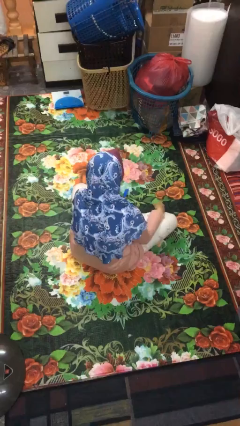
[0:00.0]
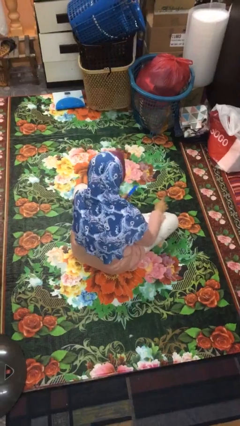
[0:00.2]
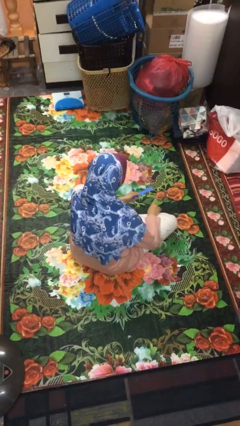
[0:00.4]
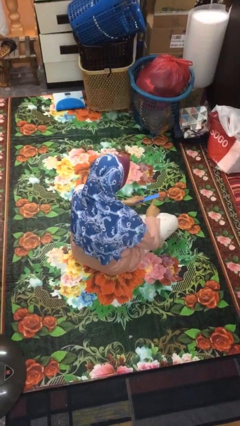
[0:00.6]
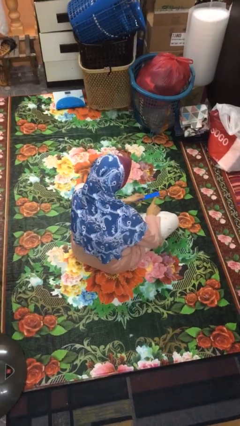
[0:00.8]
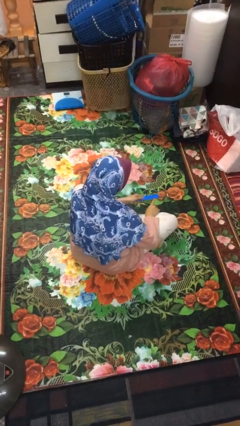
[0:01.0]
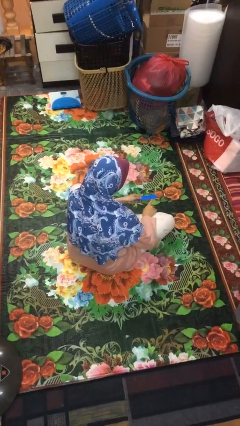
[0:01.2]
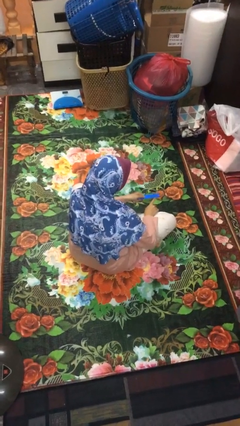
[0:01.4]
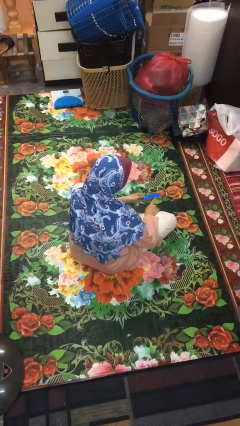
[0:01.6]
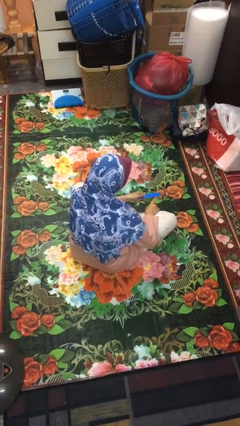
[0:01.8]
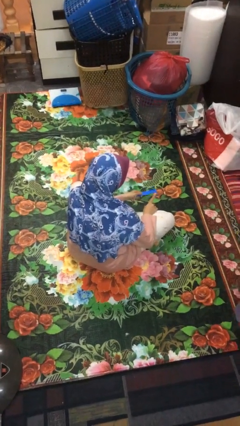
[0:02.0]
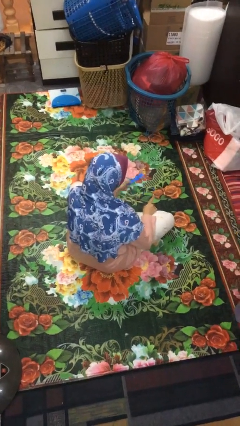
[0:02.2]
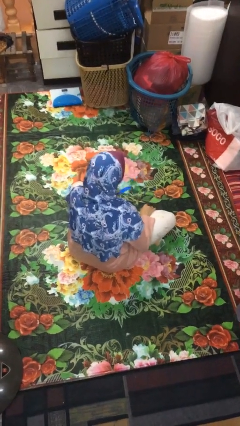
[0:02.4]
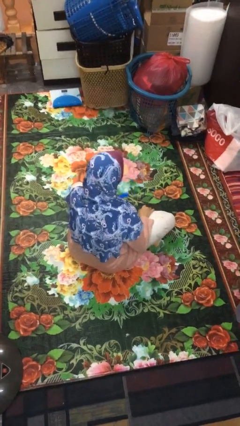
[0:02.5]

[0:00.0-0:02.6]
person files fingernails

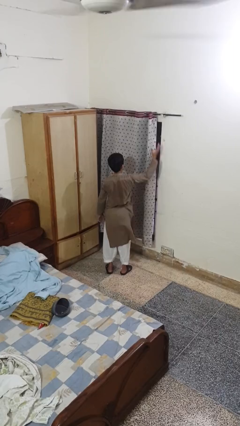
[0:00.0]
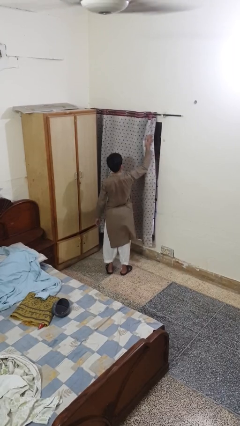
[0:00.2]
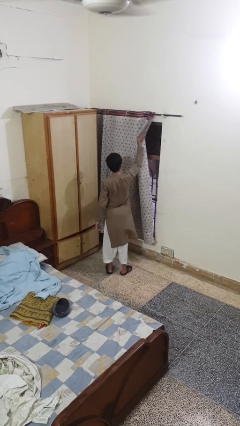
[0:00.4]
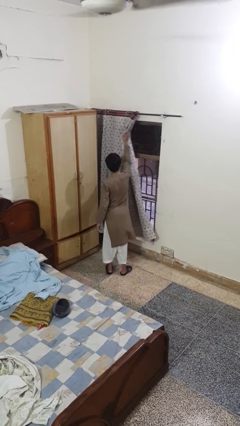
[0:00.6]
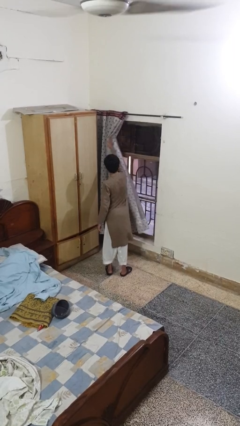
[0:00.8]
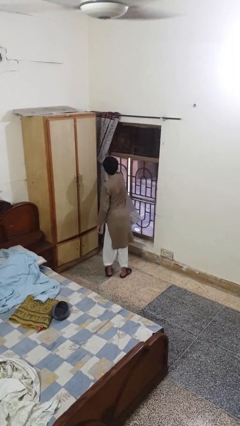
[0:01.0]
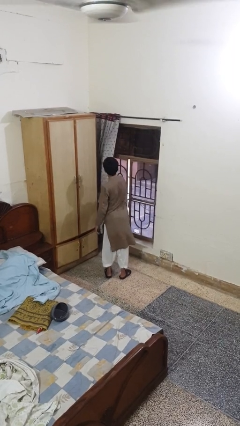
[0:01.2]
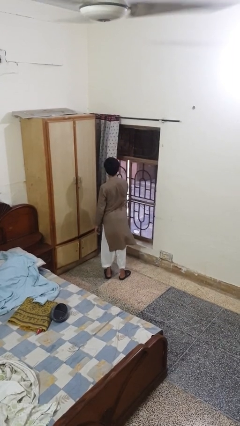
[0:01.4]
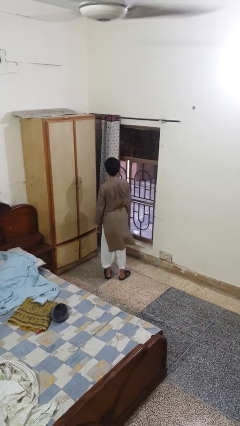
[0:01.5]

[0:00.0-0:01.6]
person opens curtains

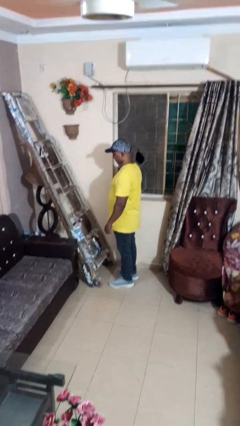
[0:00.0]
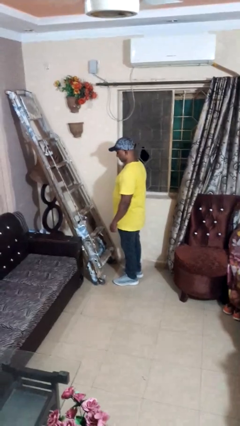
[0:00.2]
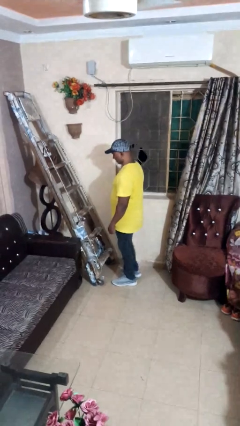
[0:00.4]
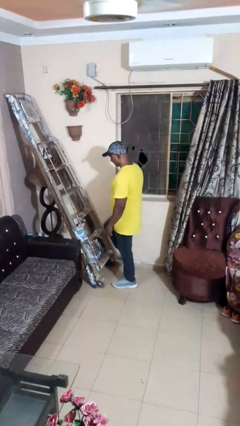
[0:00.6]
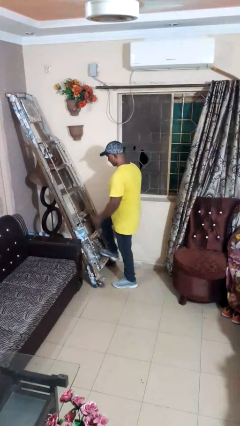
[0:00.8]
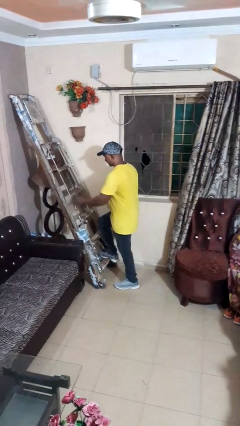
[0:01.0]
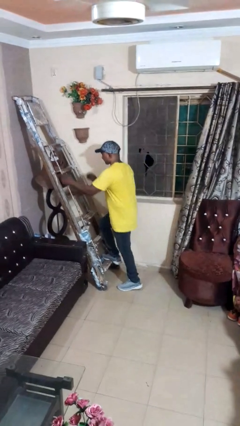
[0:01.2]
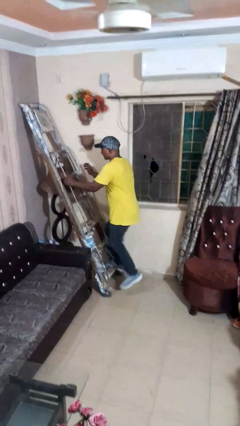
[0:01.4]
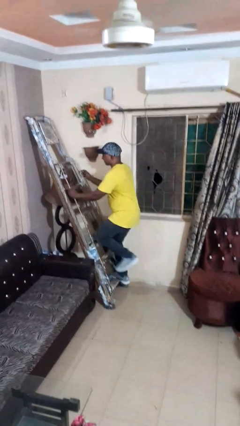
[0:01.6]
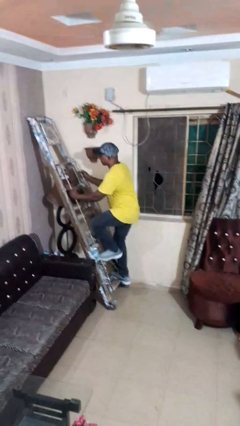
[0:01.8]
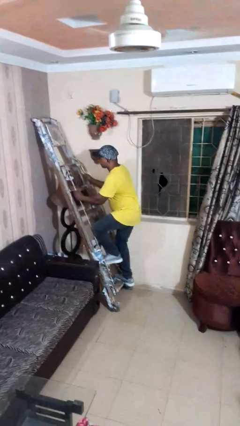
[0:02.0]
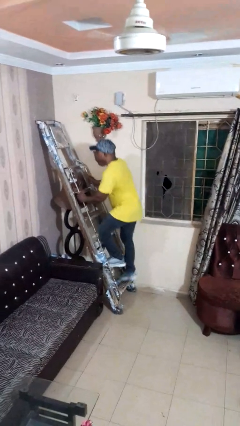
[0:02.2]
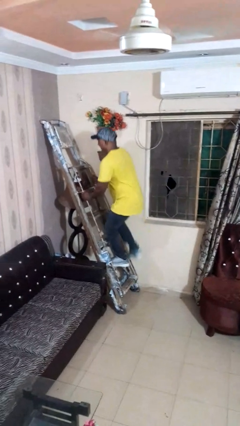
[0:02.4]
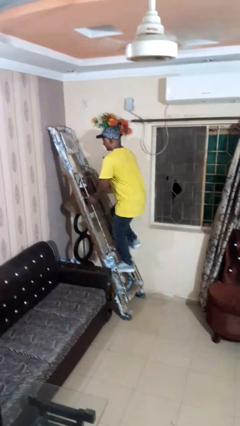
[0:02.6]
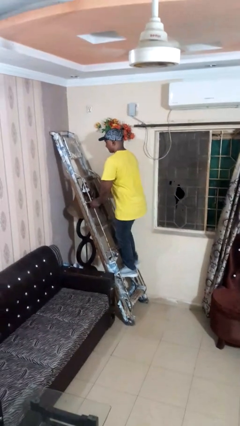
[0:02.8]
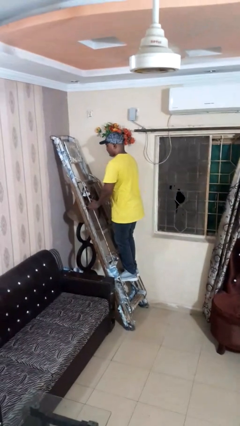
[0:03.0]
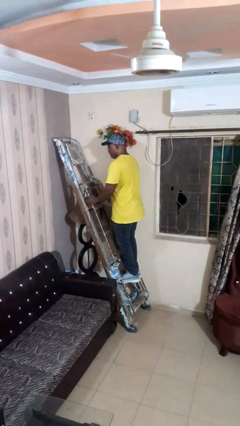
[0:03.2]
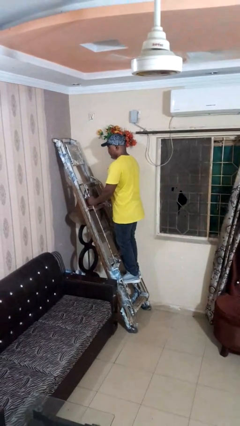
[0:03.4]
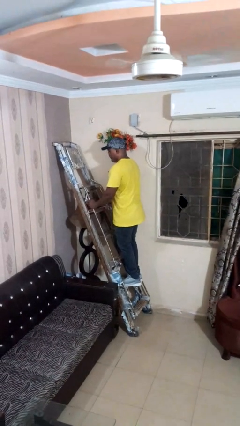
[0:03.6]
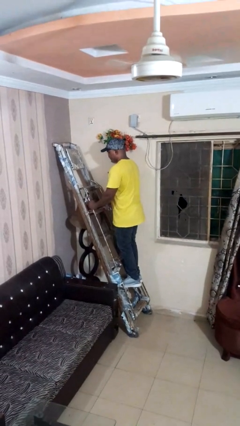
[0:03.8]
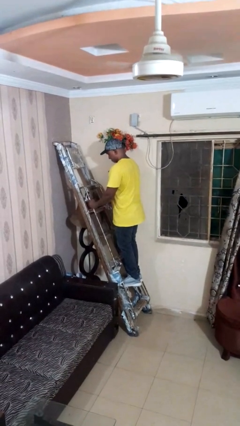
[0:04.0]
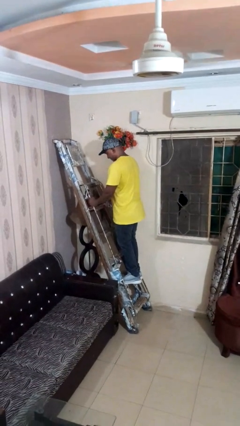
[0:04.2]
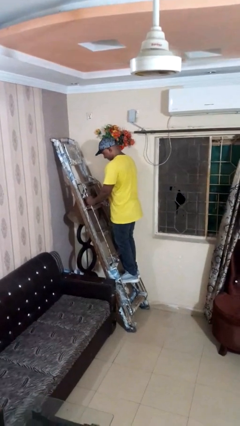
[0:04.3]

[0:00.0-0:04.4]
person climbs up ladder

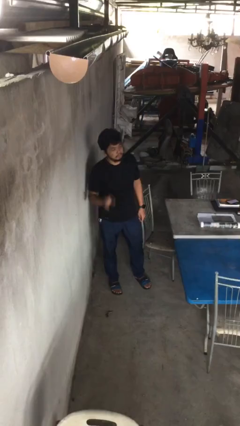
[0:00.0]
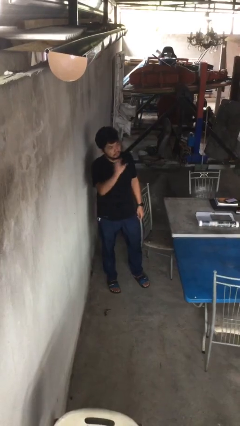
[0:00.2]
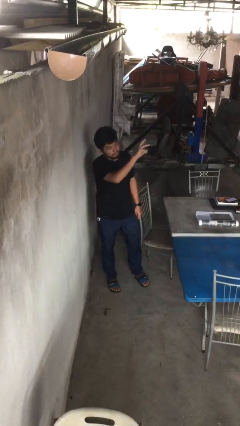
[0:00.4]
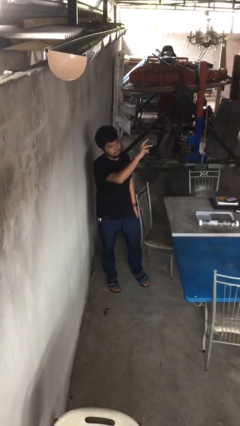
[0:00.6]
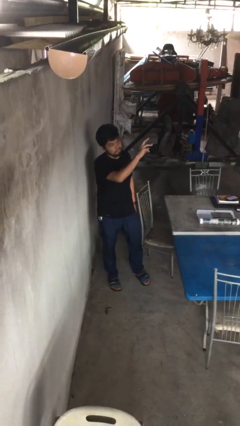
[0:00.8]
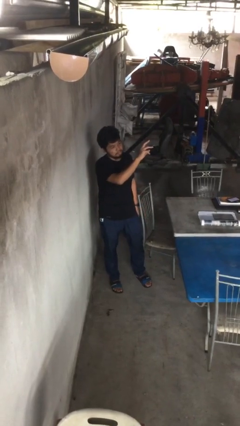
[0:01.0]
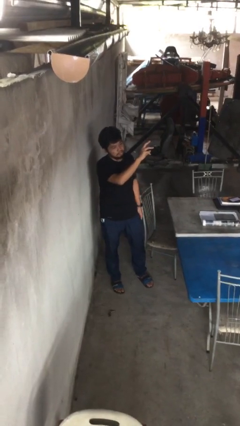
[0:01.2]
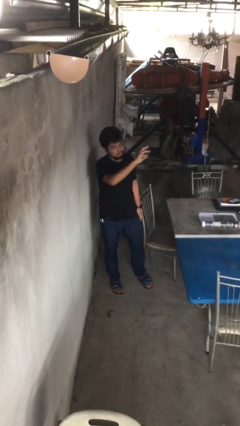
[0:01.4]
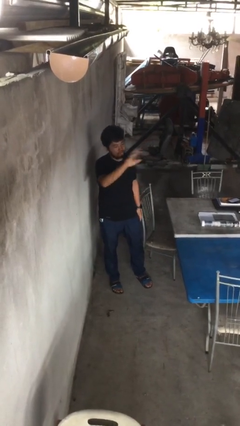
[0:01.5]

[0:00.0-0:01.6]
person gestures swipe left

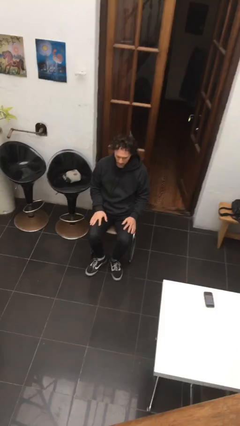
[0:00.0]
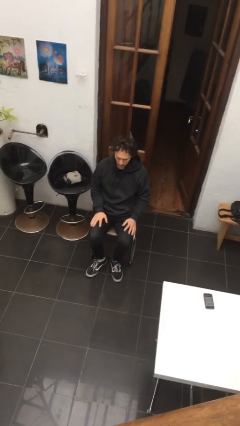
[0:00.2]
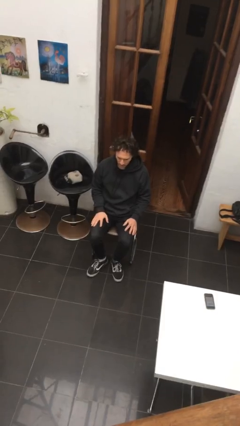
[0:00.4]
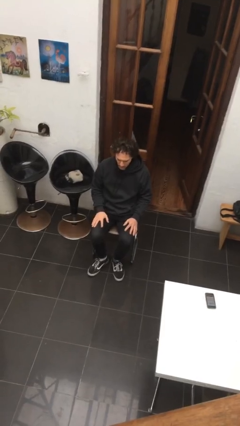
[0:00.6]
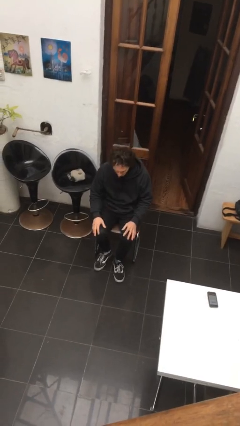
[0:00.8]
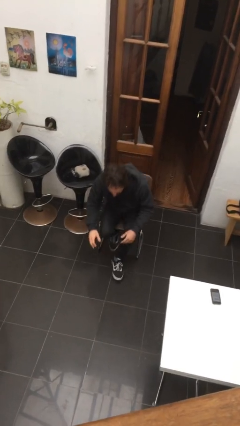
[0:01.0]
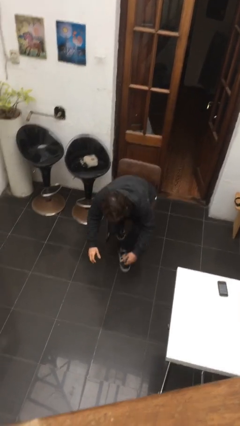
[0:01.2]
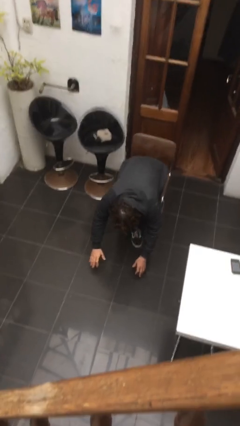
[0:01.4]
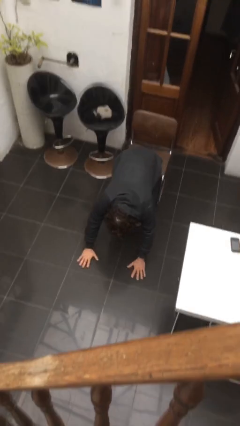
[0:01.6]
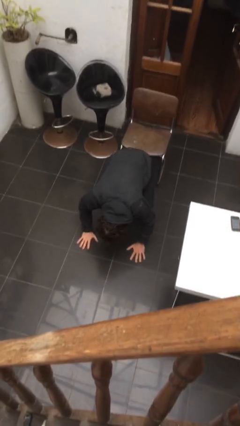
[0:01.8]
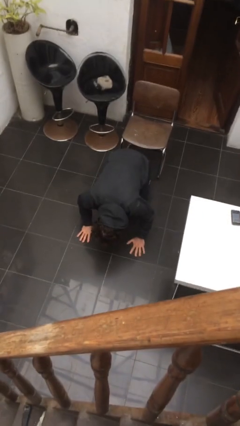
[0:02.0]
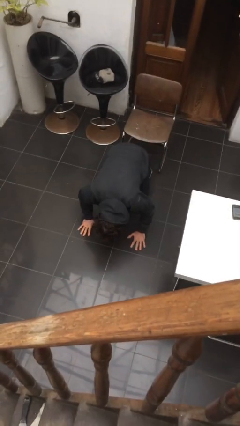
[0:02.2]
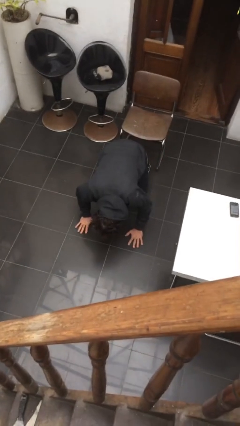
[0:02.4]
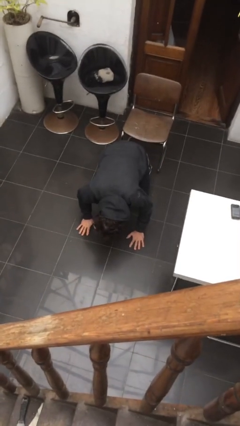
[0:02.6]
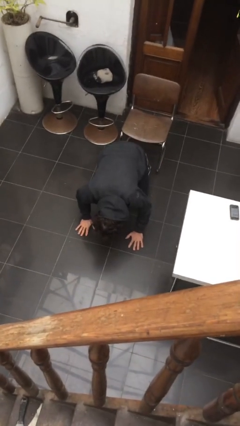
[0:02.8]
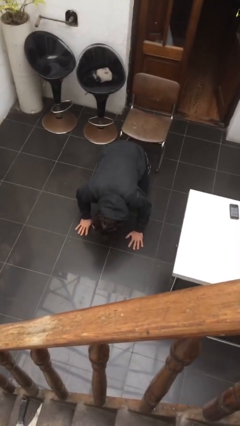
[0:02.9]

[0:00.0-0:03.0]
person falls from chair

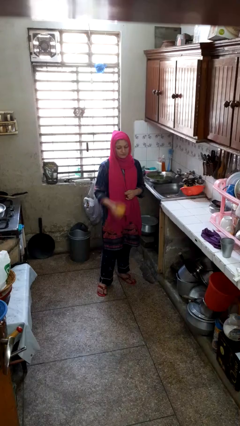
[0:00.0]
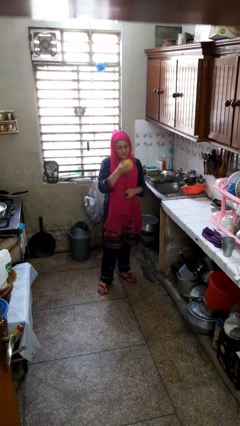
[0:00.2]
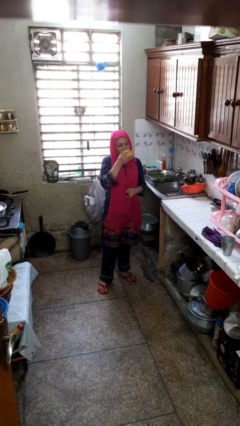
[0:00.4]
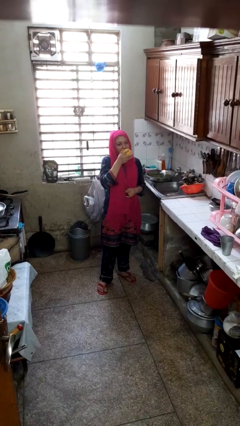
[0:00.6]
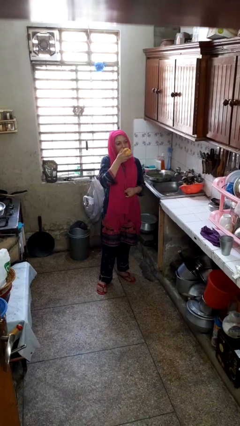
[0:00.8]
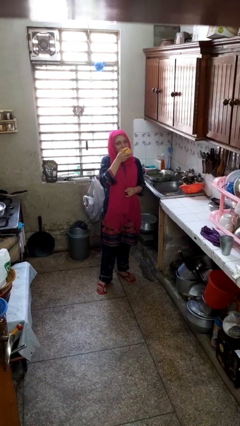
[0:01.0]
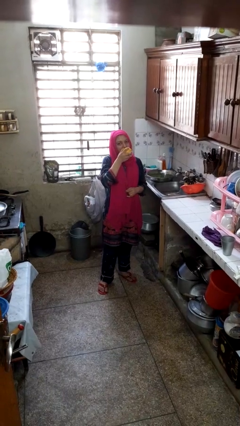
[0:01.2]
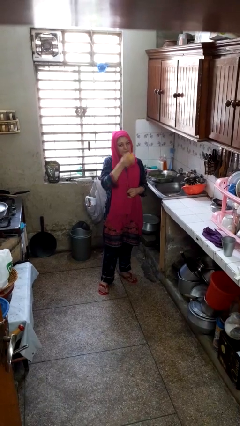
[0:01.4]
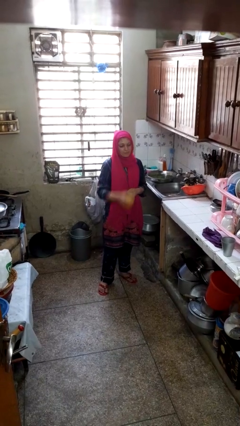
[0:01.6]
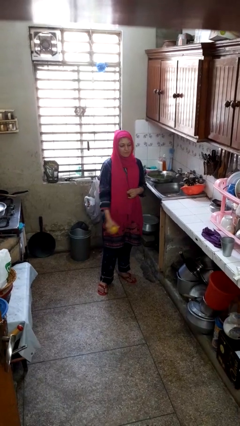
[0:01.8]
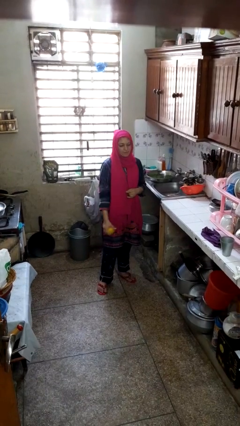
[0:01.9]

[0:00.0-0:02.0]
person eats apple

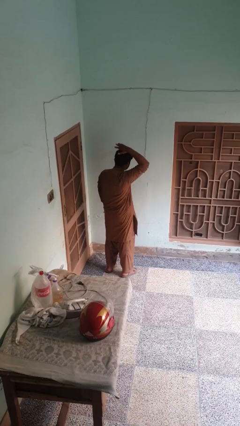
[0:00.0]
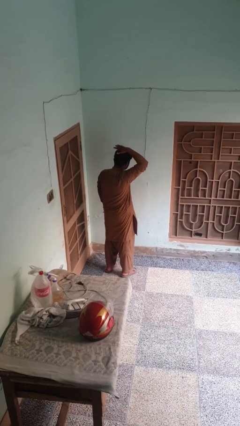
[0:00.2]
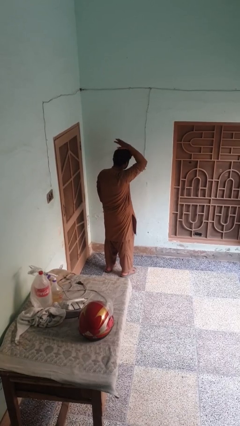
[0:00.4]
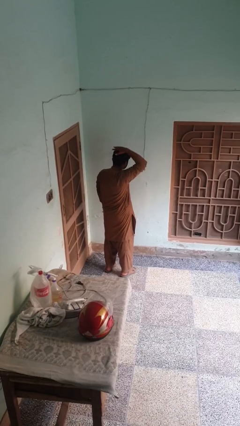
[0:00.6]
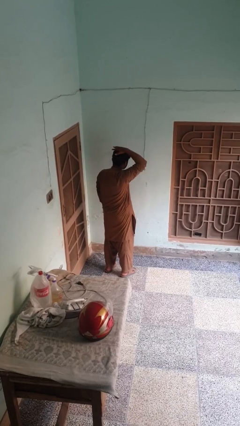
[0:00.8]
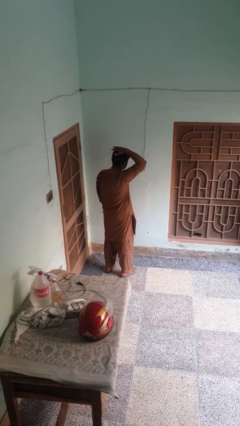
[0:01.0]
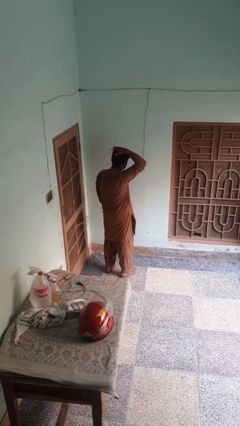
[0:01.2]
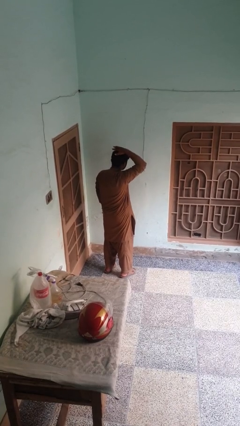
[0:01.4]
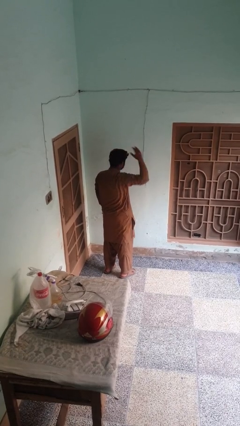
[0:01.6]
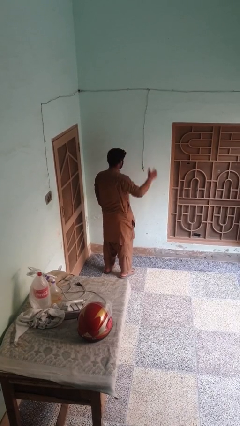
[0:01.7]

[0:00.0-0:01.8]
person pats head

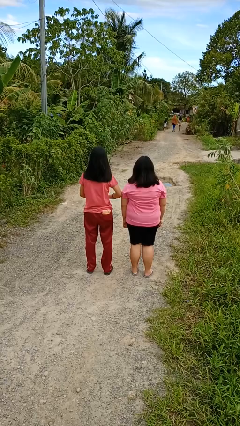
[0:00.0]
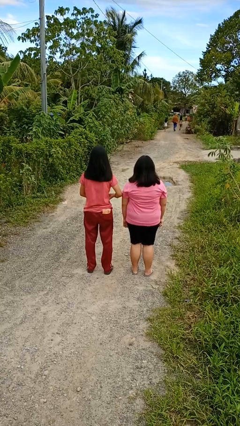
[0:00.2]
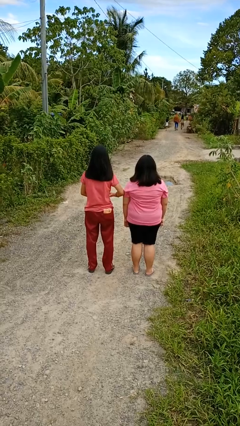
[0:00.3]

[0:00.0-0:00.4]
person nudges person with elbow
